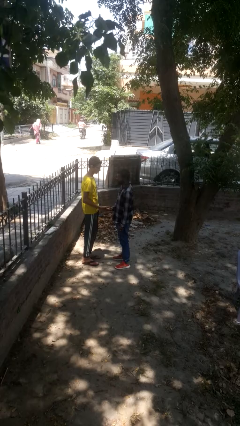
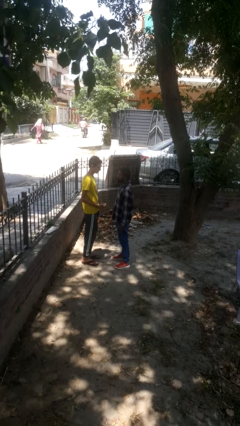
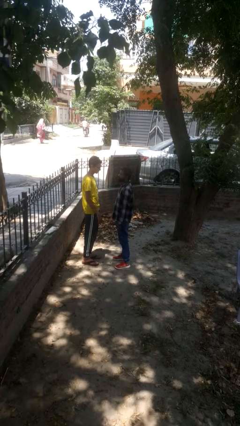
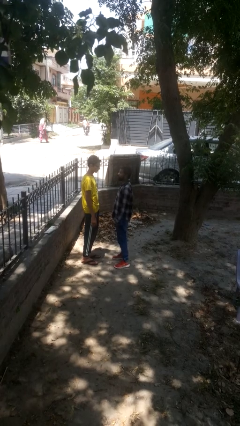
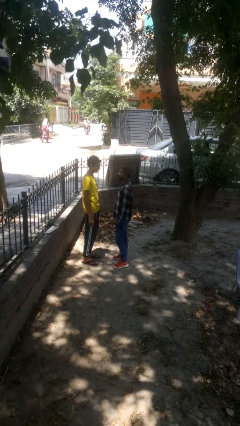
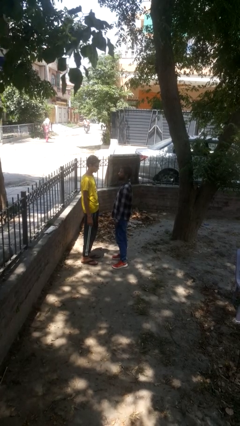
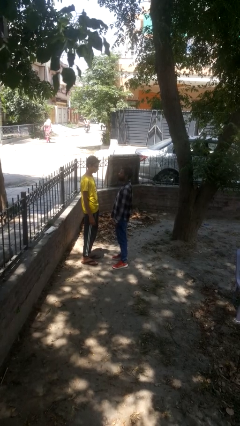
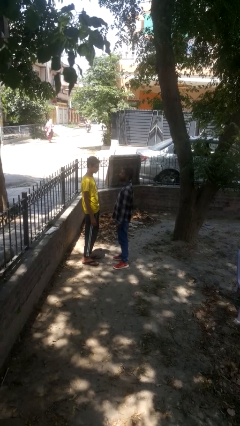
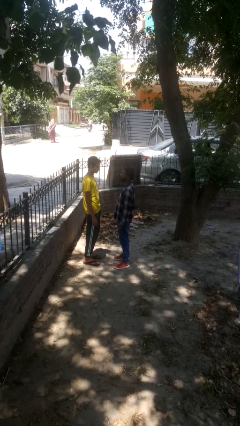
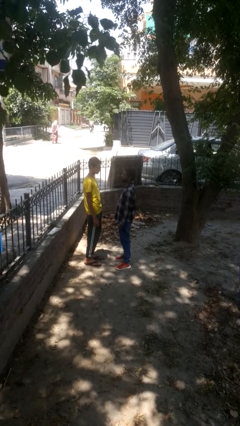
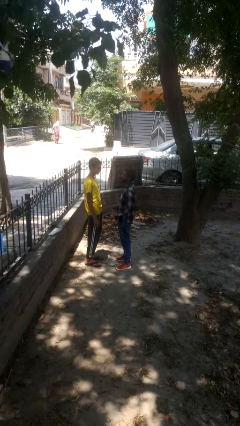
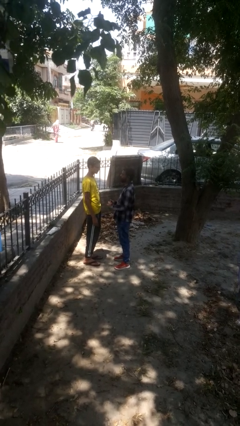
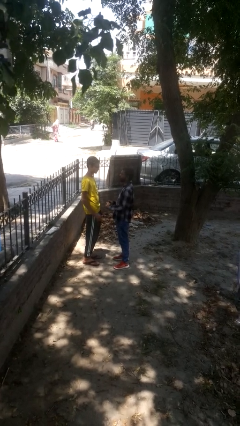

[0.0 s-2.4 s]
person highfives hand

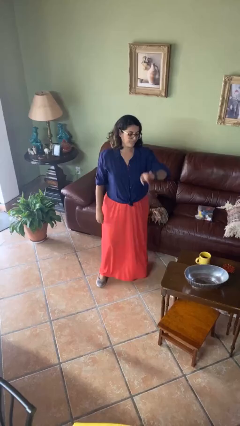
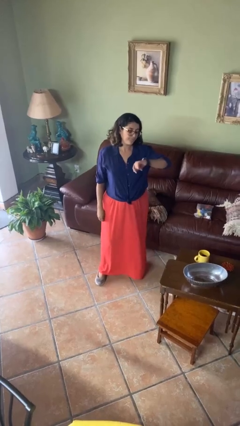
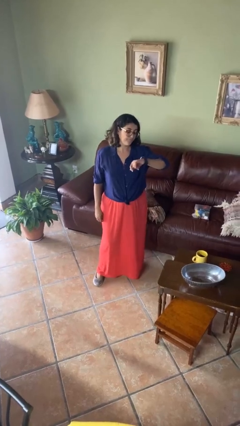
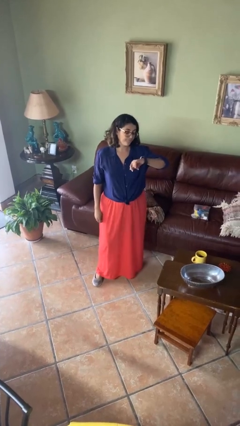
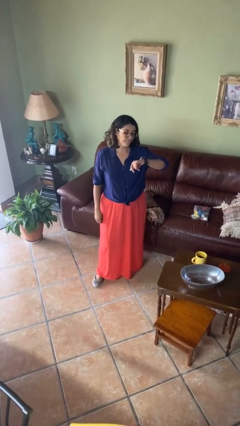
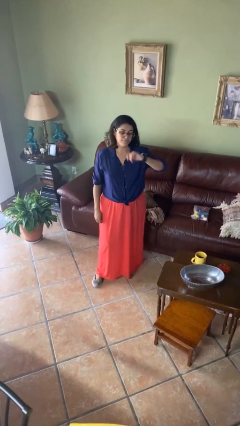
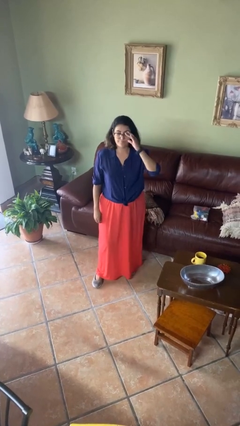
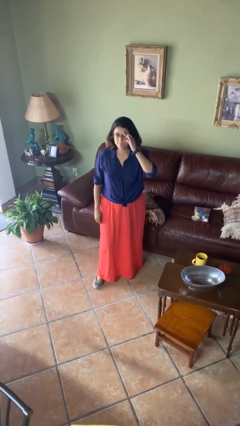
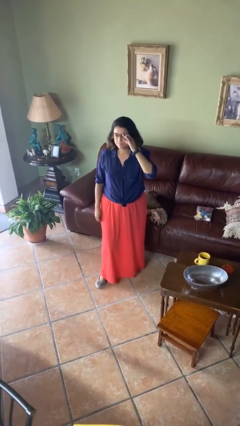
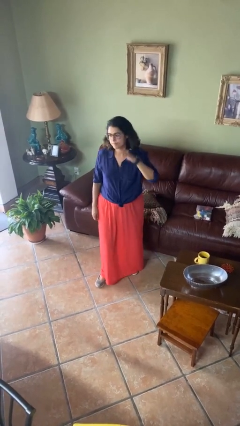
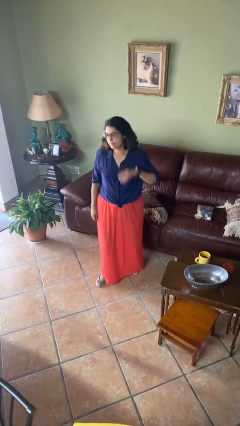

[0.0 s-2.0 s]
person looks at wristwatch

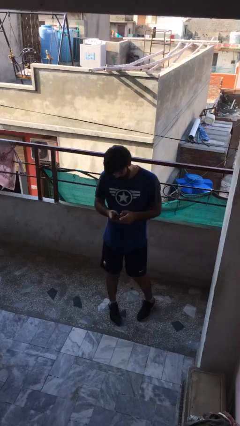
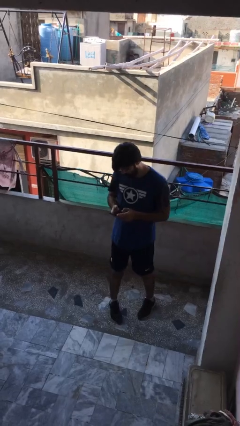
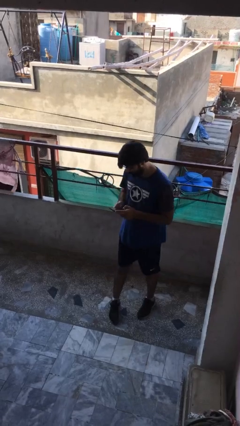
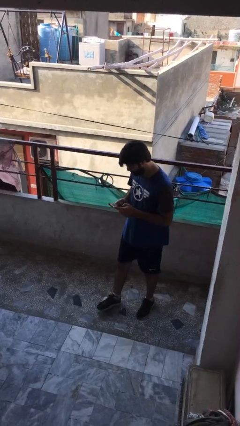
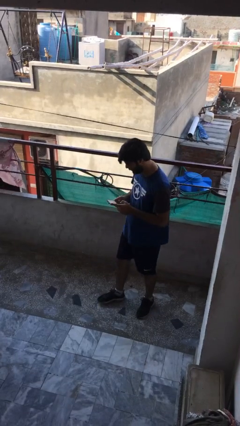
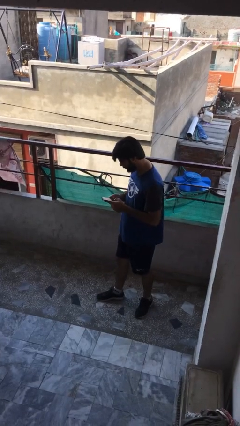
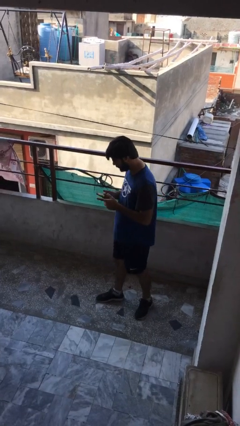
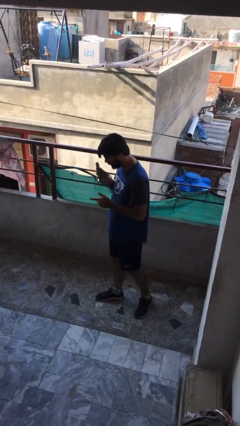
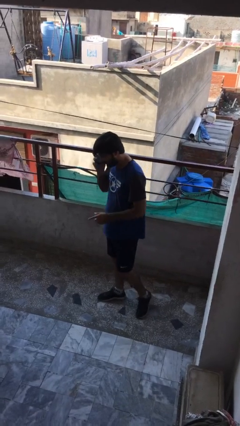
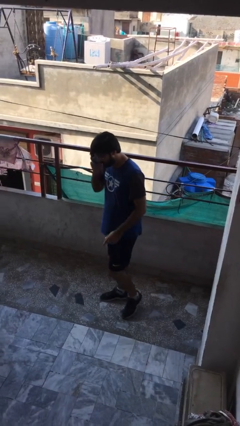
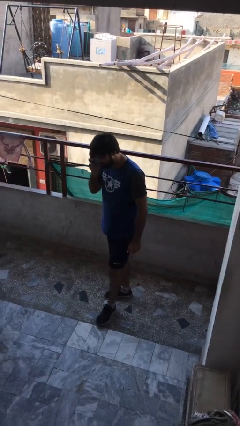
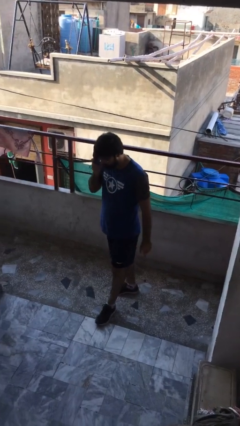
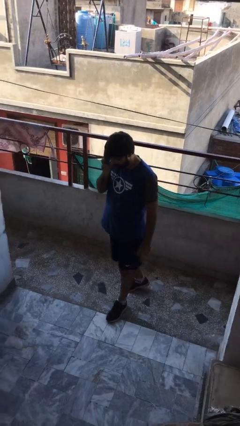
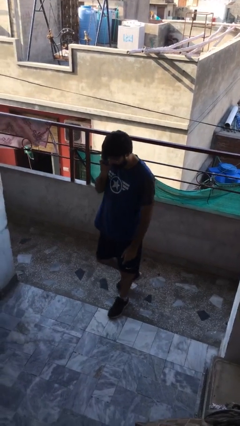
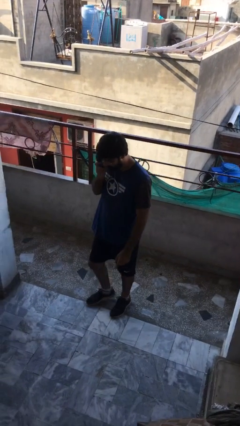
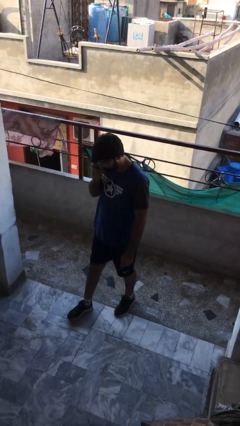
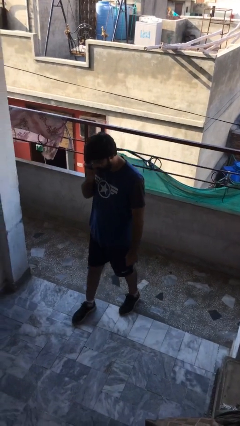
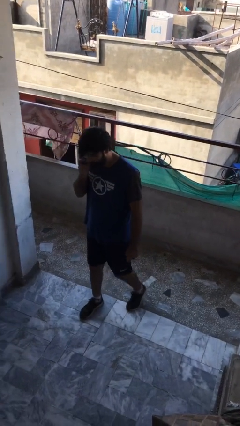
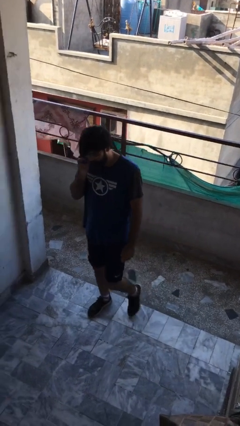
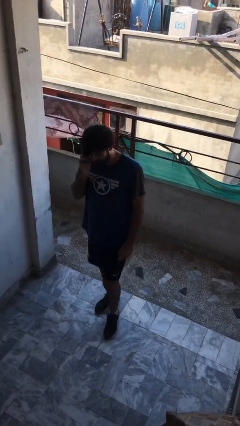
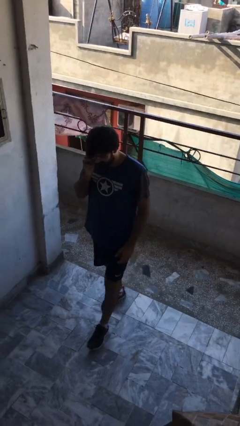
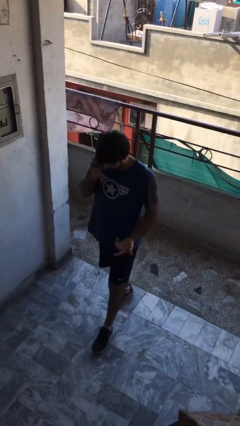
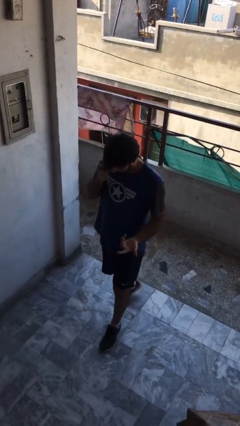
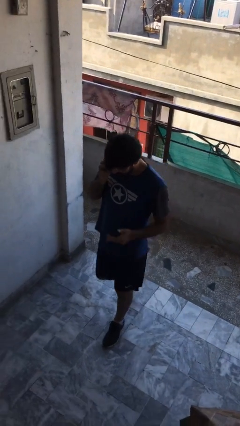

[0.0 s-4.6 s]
person talks on phone

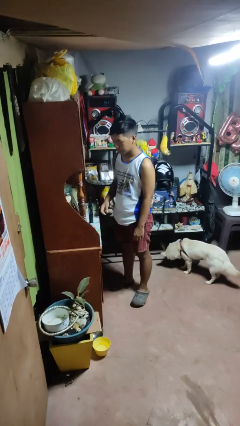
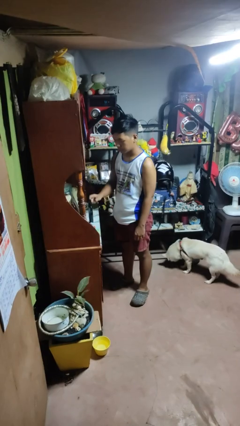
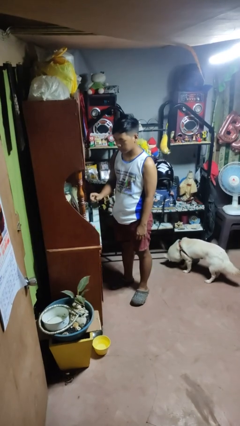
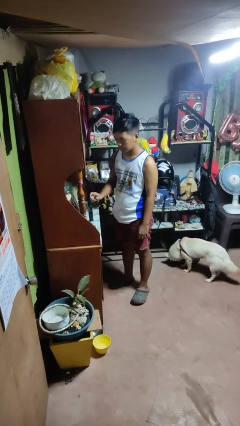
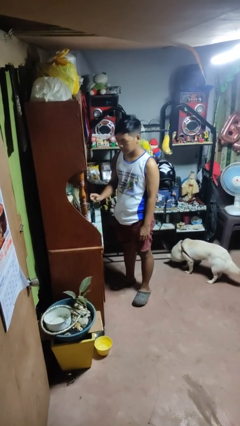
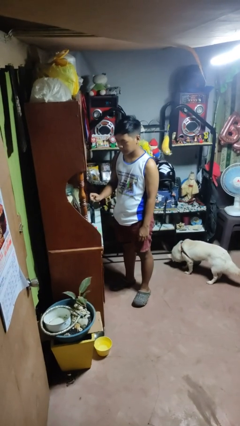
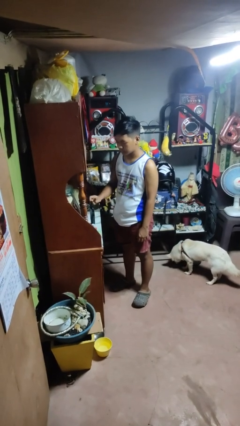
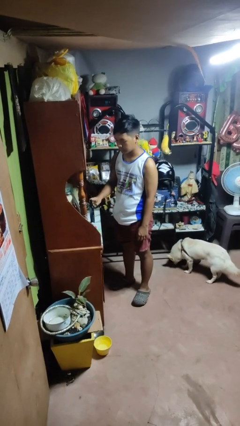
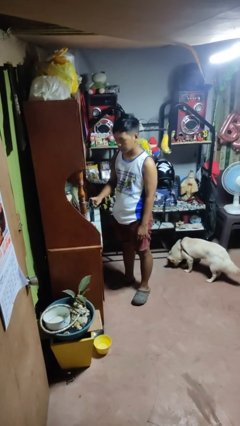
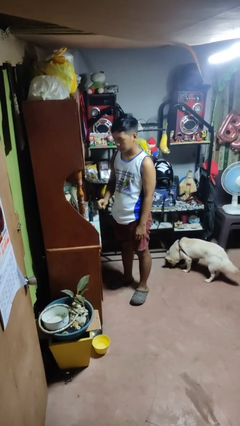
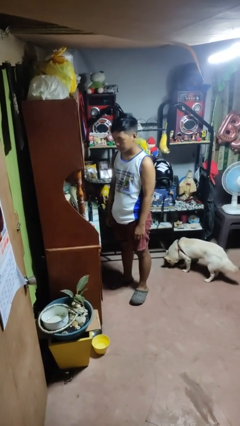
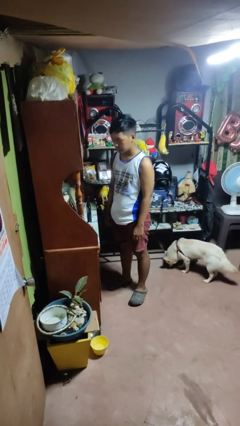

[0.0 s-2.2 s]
person taps object with finger

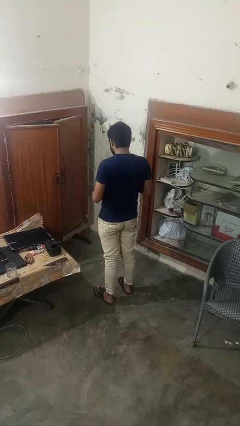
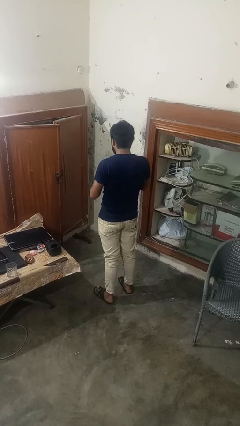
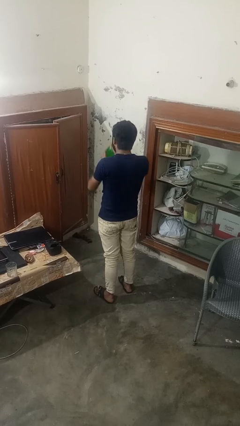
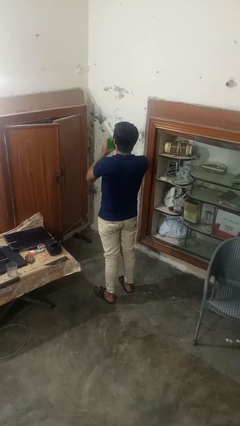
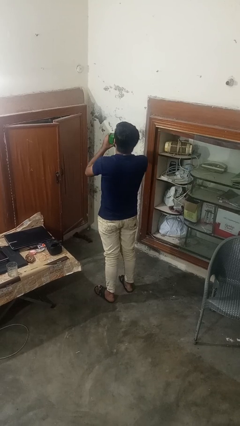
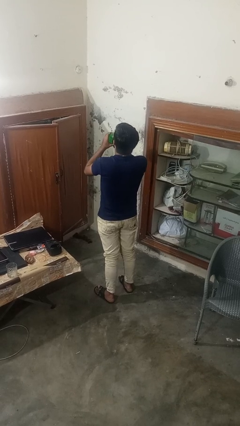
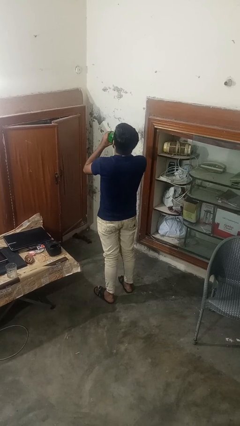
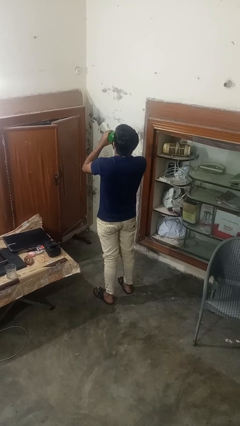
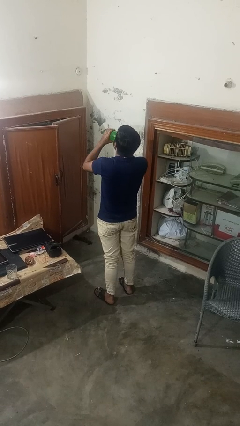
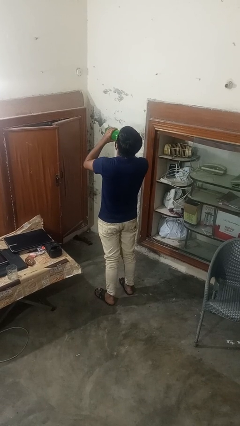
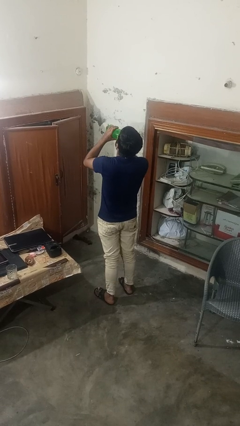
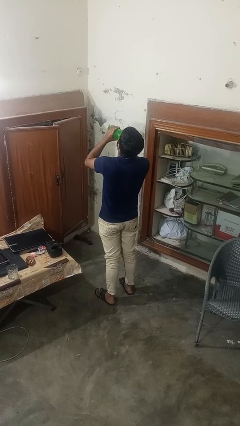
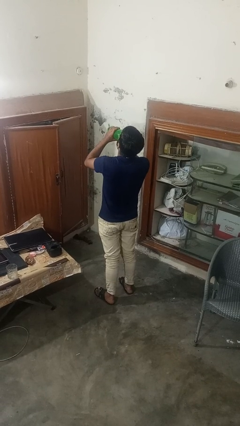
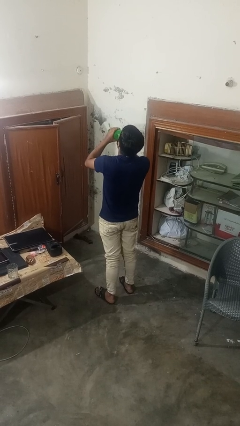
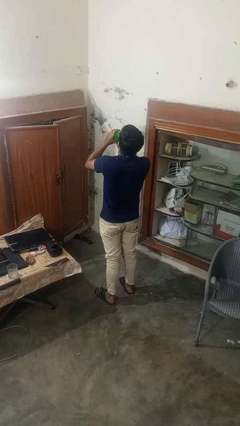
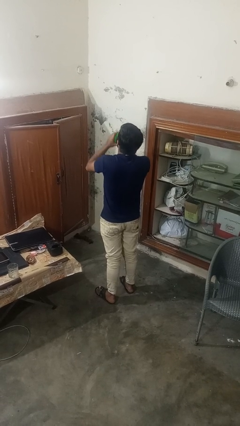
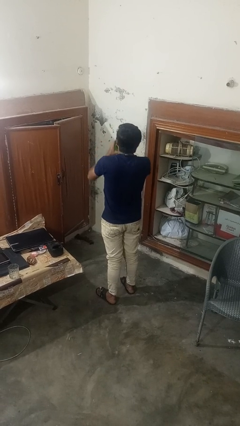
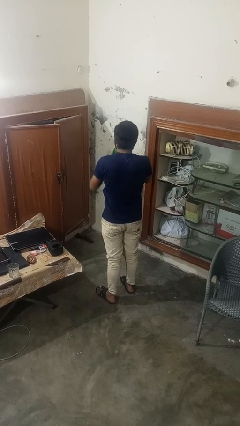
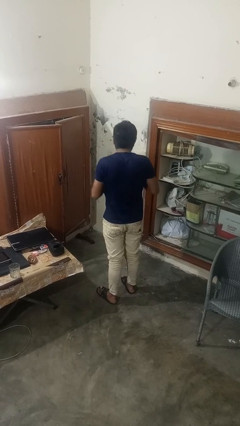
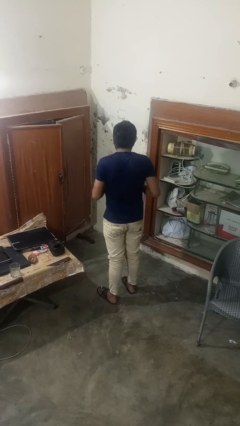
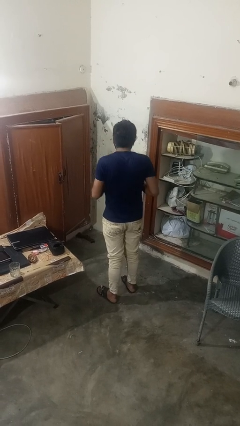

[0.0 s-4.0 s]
person drinks from bottle

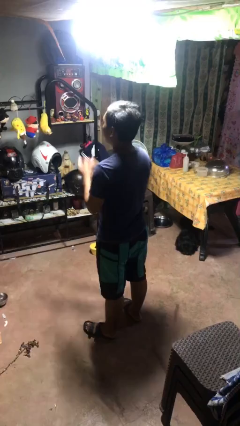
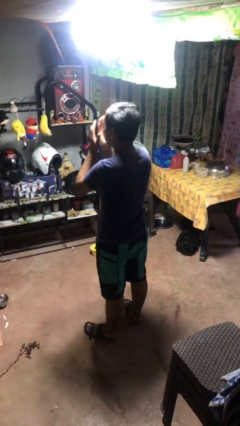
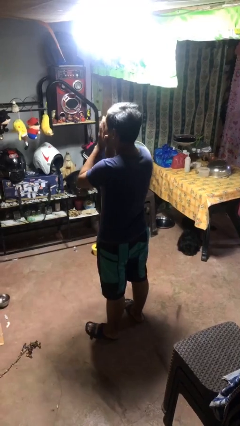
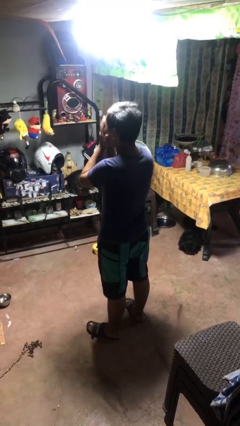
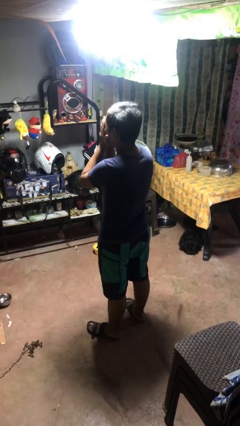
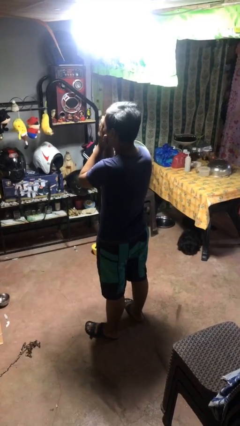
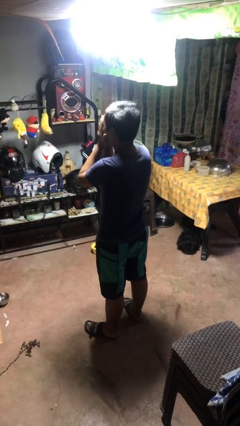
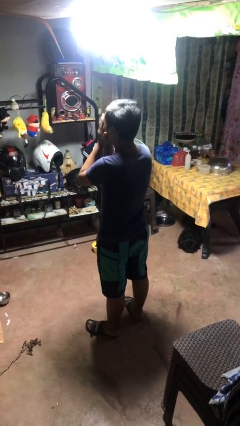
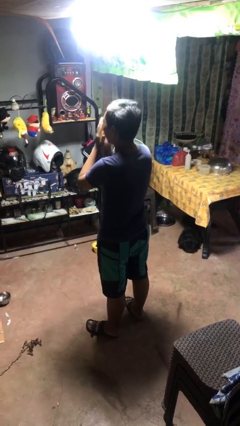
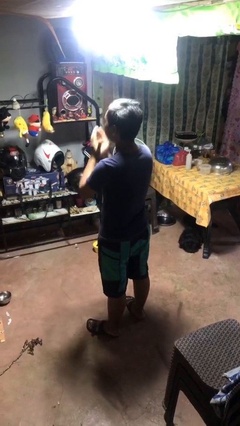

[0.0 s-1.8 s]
person covers face with hands

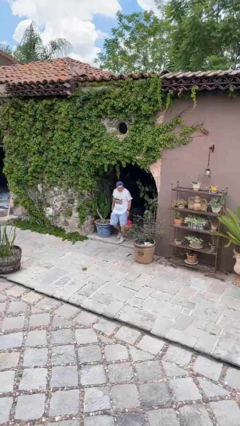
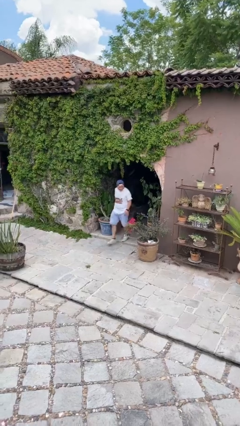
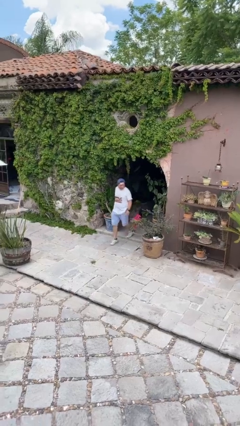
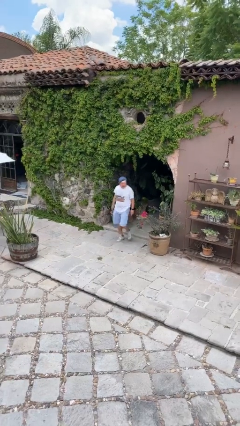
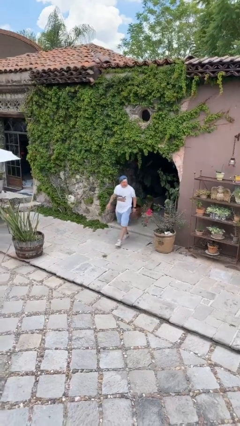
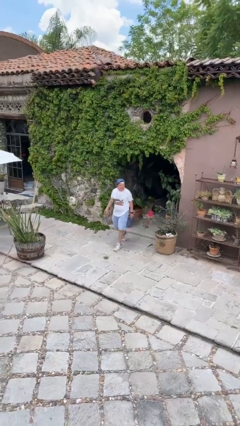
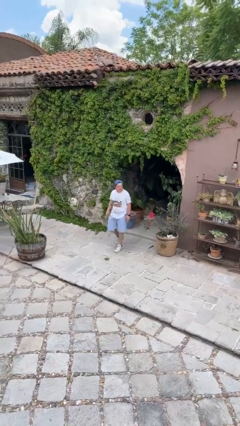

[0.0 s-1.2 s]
person enters scene through structure
